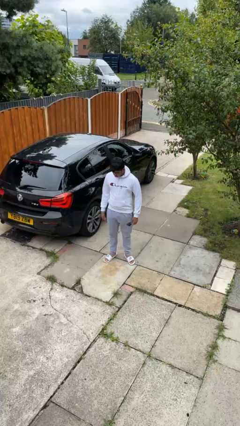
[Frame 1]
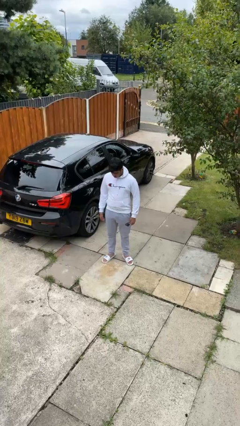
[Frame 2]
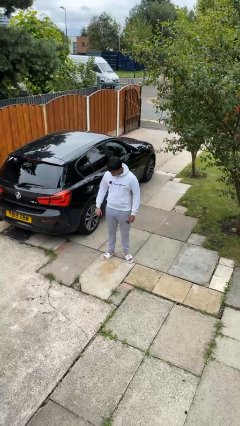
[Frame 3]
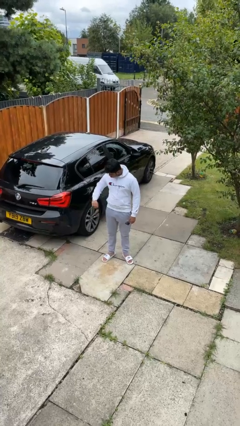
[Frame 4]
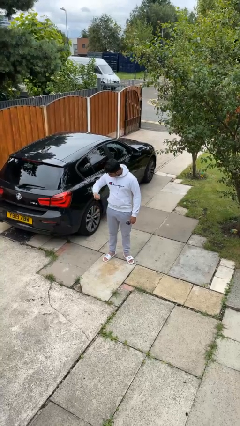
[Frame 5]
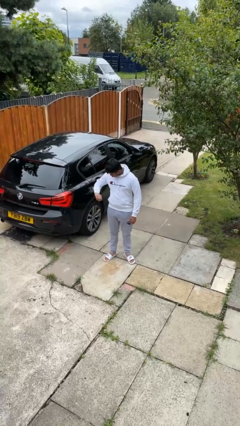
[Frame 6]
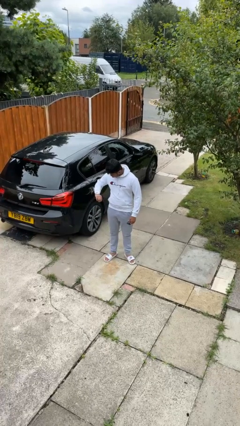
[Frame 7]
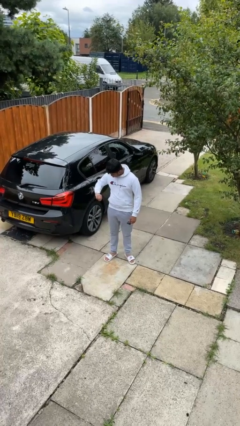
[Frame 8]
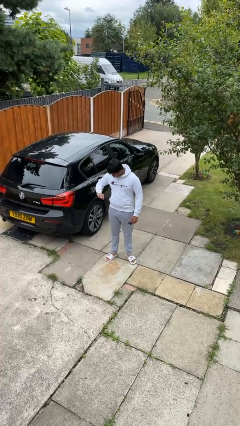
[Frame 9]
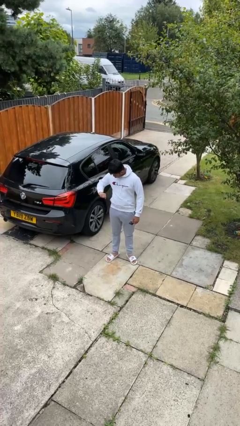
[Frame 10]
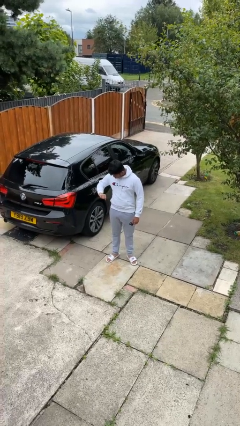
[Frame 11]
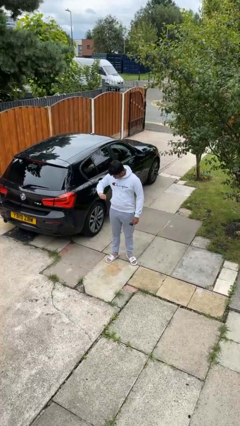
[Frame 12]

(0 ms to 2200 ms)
person looks at wristwatch

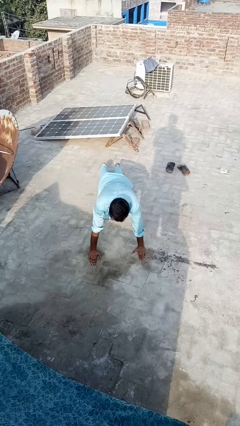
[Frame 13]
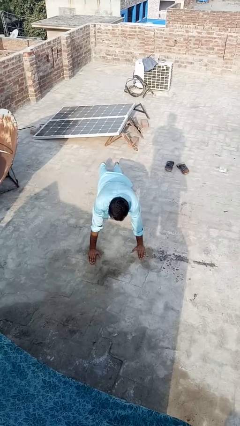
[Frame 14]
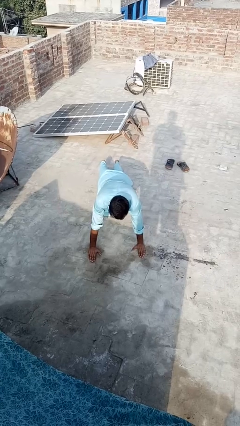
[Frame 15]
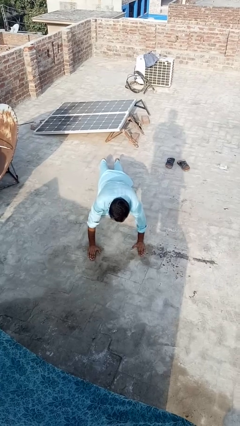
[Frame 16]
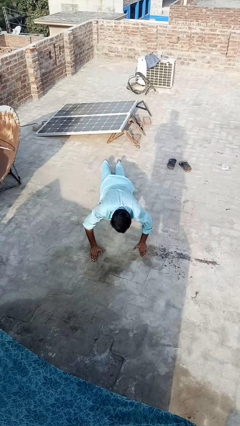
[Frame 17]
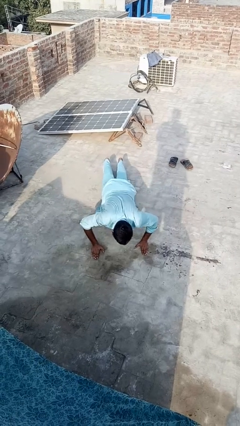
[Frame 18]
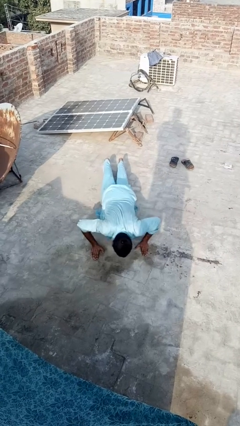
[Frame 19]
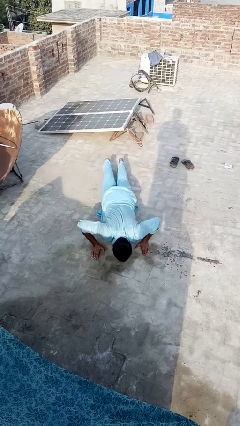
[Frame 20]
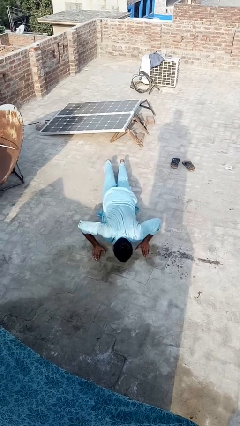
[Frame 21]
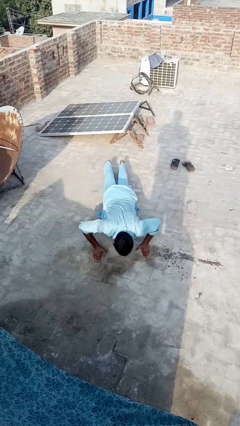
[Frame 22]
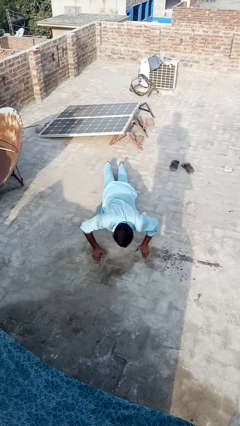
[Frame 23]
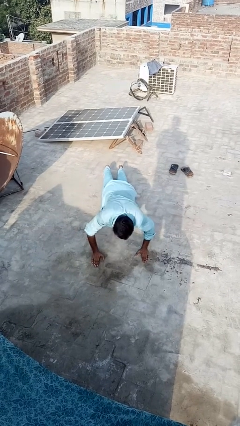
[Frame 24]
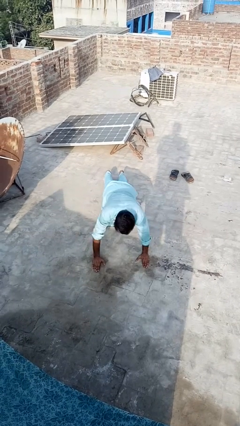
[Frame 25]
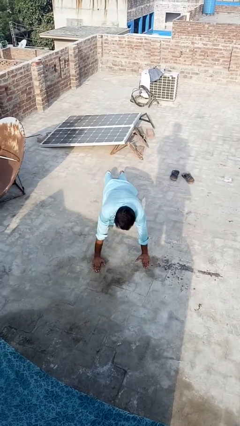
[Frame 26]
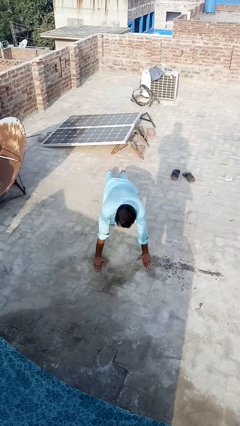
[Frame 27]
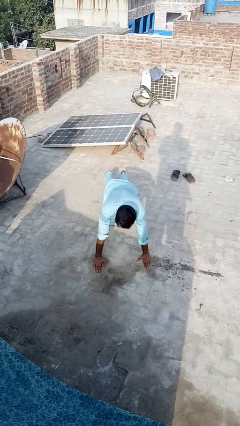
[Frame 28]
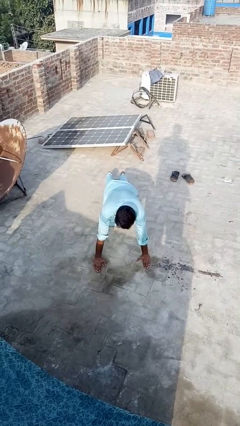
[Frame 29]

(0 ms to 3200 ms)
person exercises with pushup

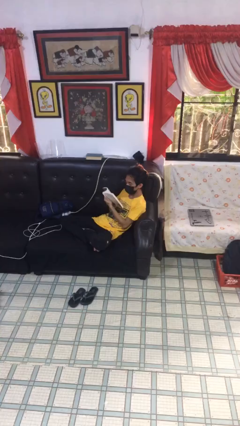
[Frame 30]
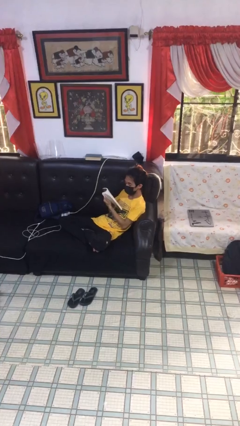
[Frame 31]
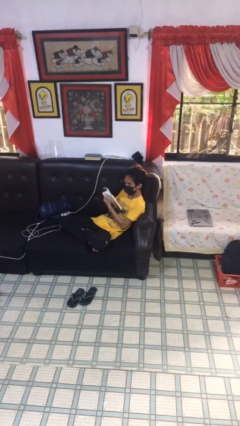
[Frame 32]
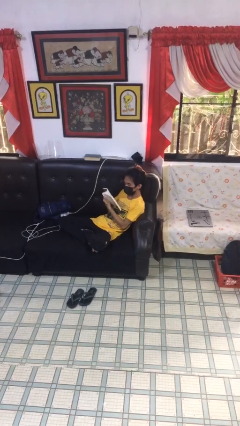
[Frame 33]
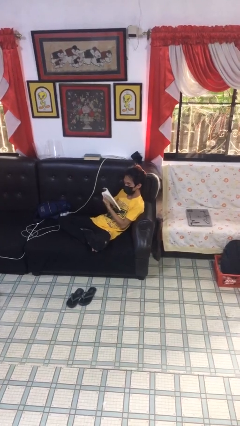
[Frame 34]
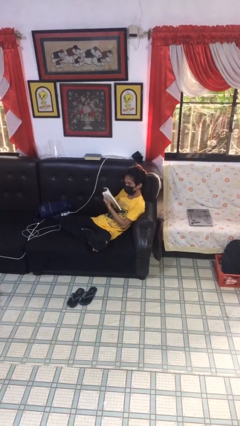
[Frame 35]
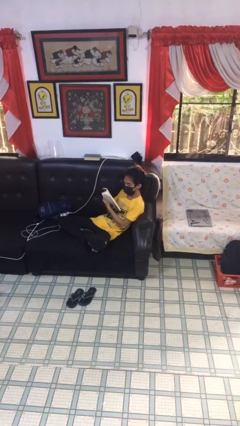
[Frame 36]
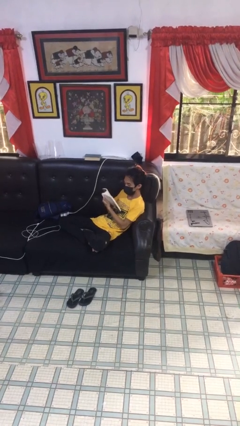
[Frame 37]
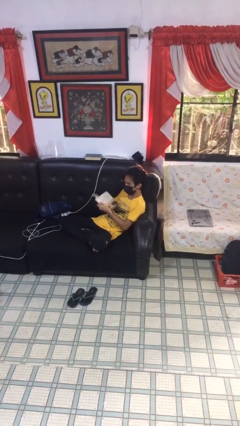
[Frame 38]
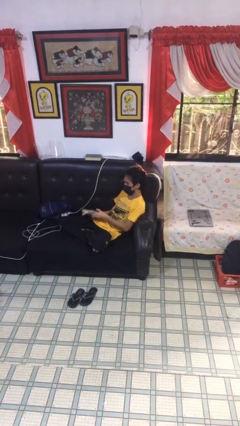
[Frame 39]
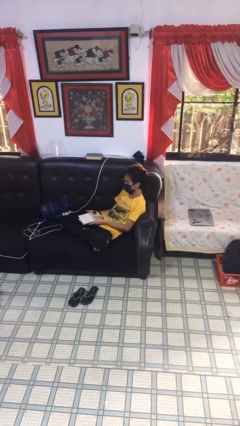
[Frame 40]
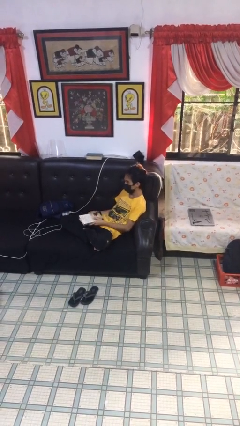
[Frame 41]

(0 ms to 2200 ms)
person reads document

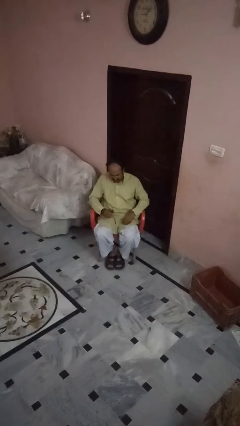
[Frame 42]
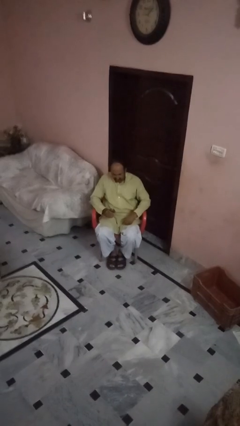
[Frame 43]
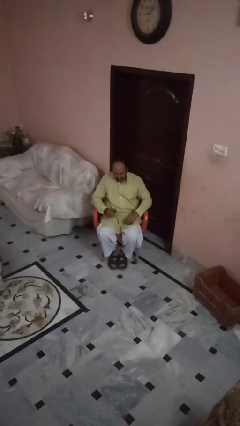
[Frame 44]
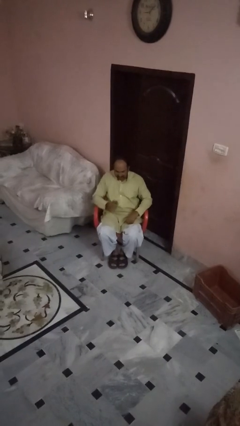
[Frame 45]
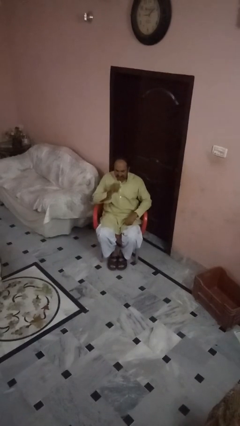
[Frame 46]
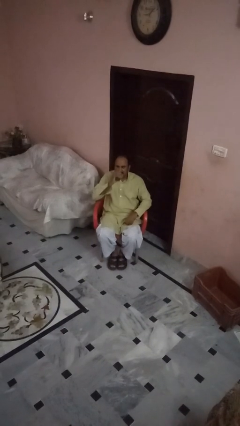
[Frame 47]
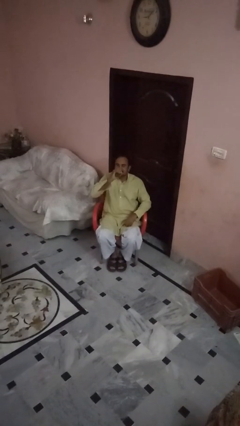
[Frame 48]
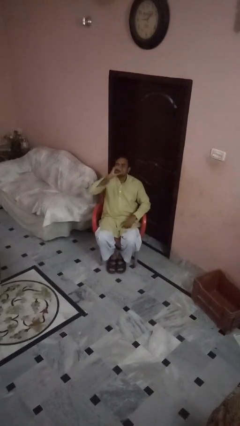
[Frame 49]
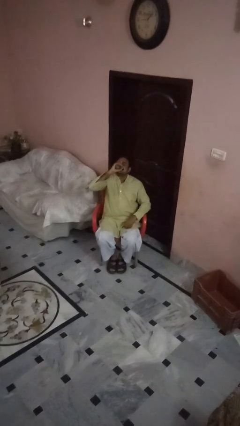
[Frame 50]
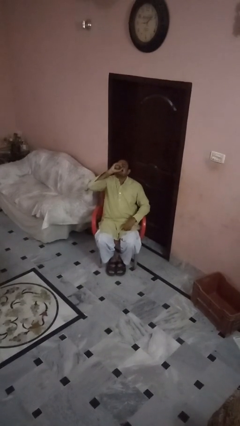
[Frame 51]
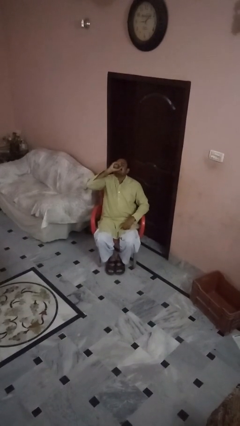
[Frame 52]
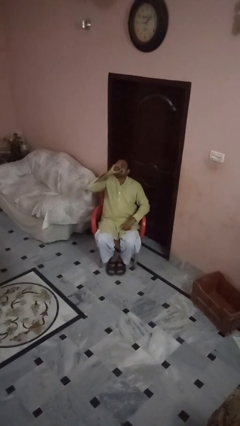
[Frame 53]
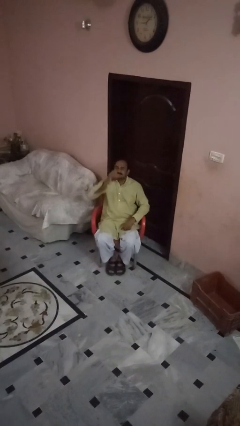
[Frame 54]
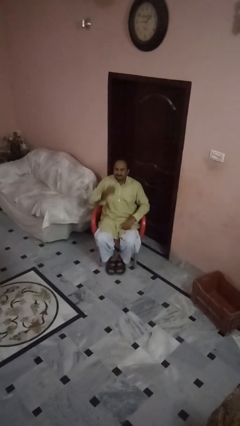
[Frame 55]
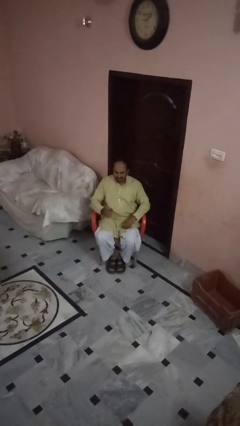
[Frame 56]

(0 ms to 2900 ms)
person drinks from beverage can

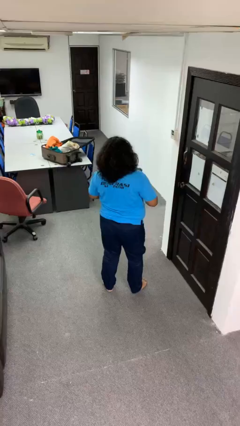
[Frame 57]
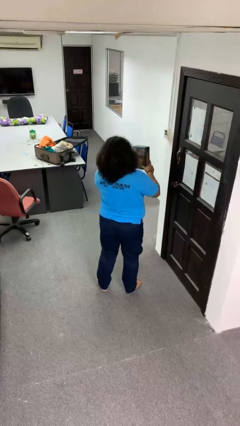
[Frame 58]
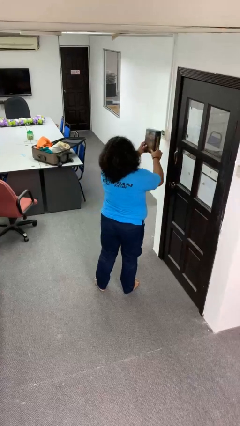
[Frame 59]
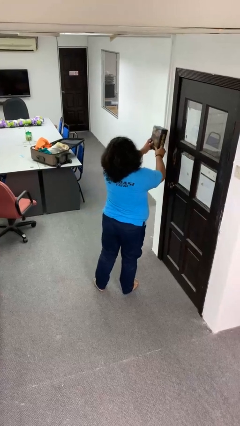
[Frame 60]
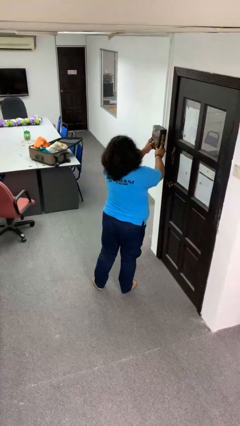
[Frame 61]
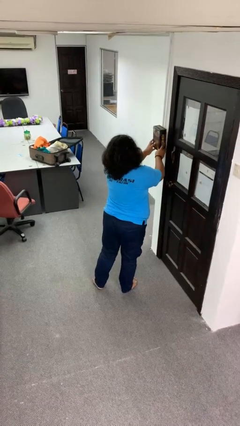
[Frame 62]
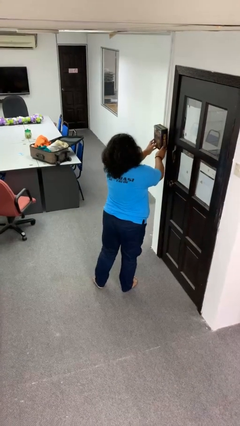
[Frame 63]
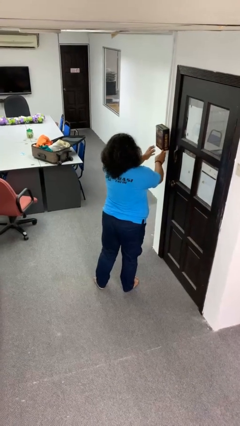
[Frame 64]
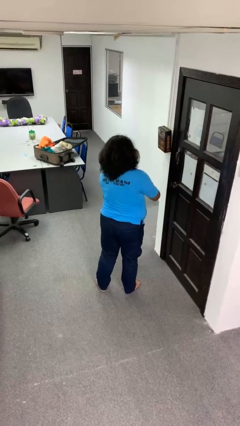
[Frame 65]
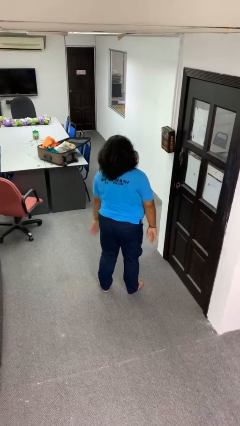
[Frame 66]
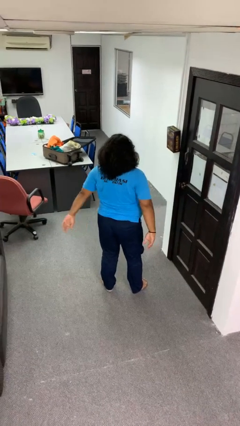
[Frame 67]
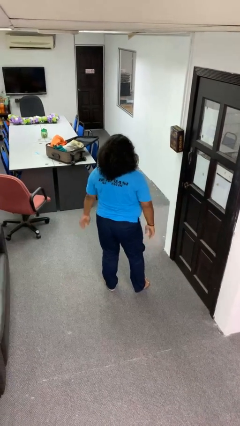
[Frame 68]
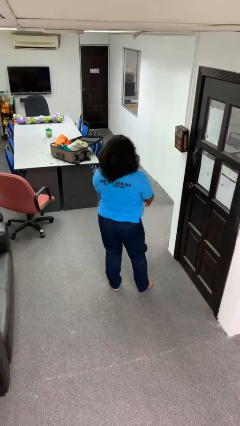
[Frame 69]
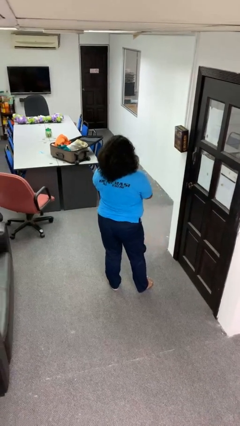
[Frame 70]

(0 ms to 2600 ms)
person puts up picture frame

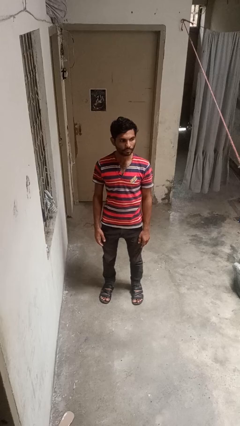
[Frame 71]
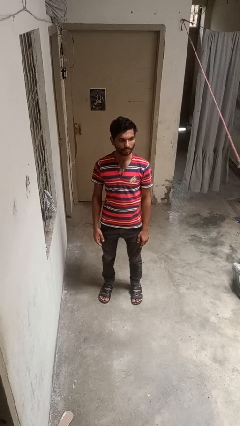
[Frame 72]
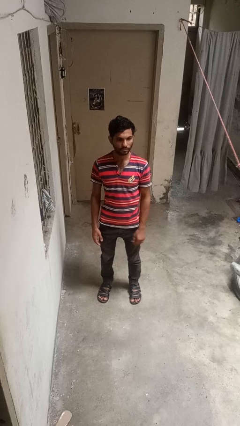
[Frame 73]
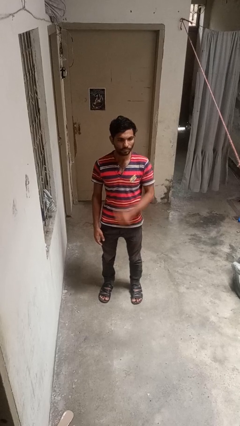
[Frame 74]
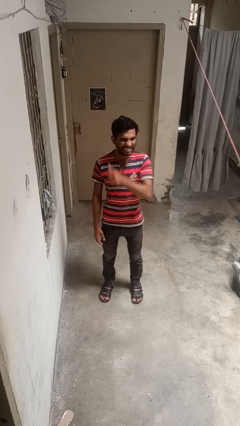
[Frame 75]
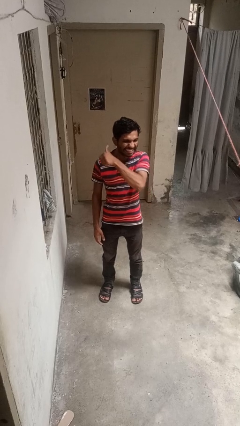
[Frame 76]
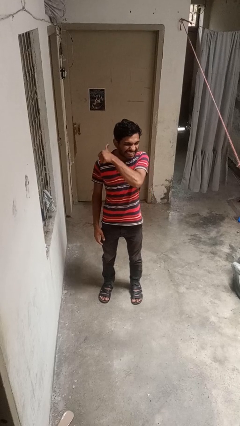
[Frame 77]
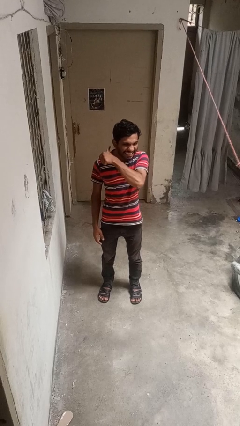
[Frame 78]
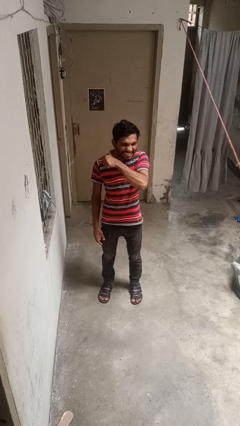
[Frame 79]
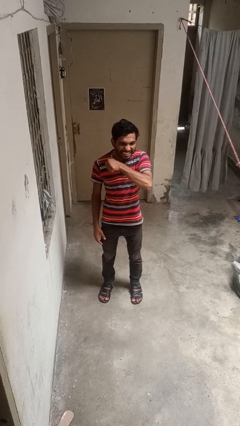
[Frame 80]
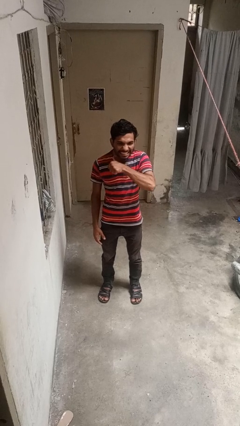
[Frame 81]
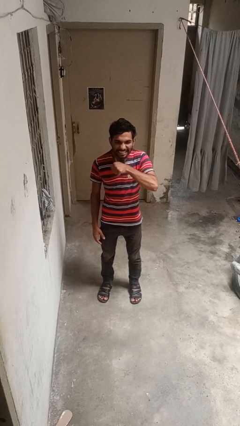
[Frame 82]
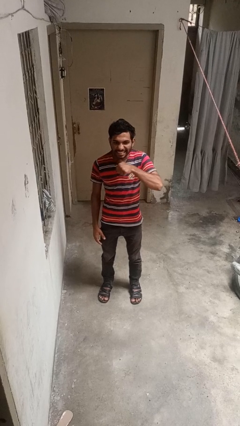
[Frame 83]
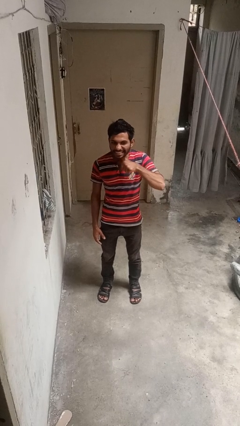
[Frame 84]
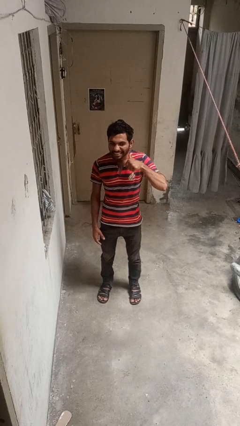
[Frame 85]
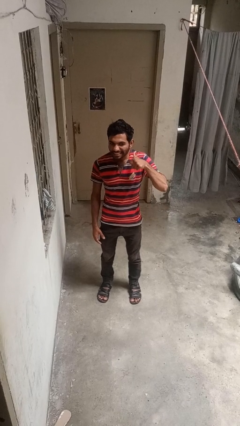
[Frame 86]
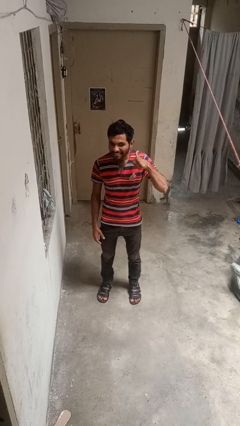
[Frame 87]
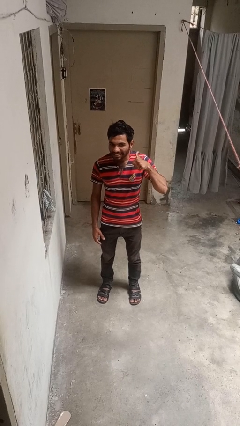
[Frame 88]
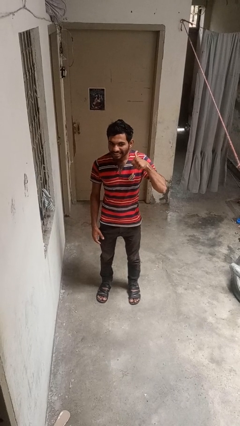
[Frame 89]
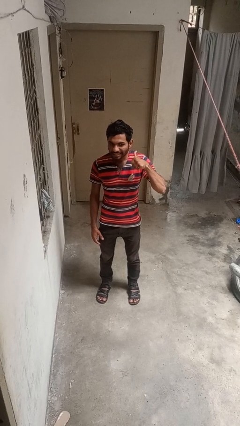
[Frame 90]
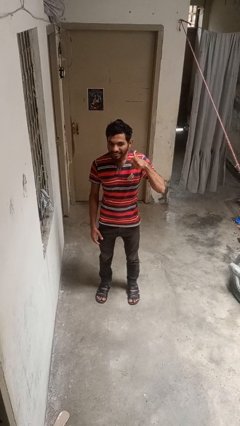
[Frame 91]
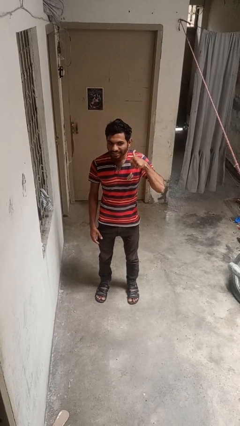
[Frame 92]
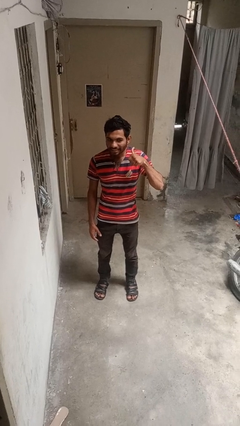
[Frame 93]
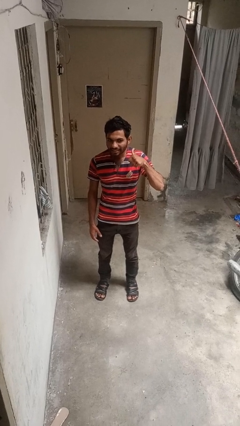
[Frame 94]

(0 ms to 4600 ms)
person gestures cut
